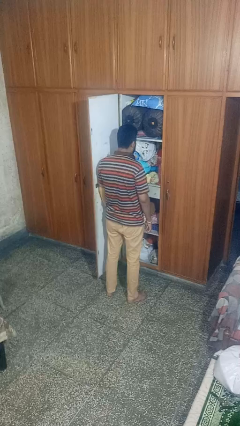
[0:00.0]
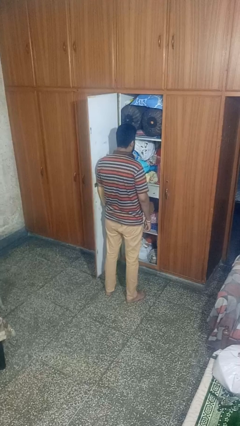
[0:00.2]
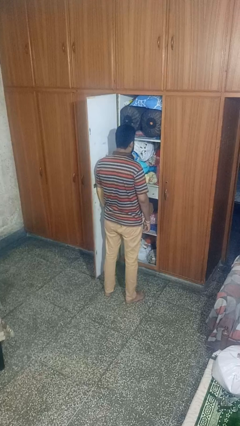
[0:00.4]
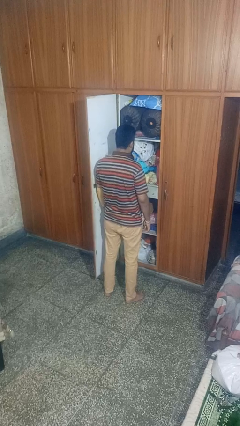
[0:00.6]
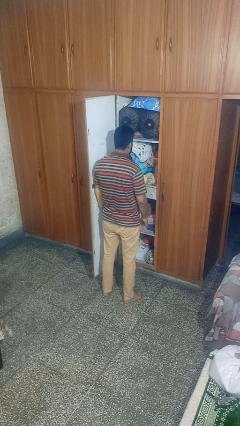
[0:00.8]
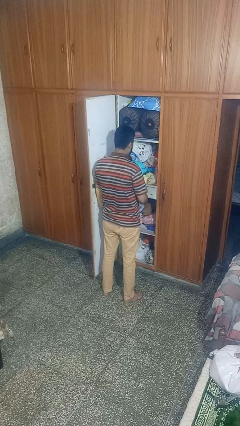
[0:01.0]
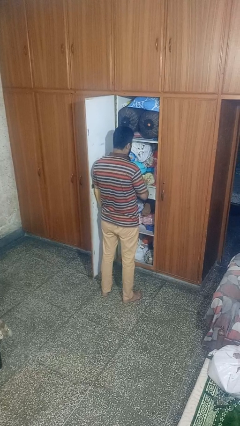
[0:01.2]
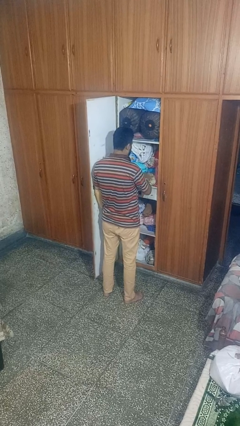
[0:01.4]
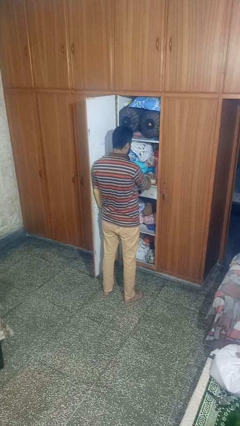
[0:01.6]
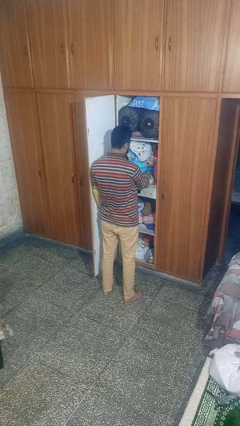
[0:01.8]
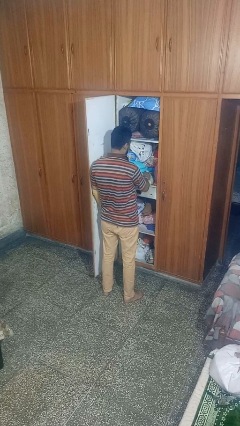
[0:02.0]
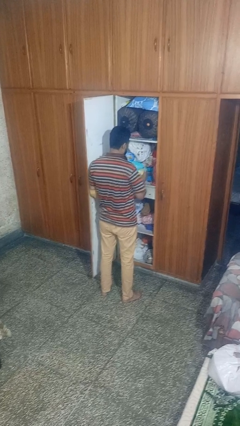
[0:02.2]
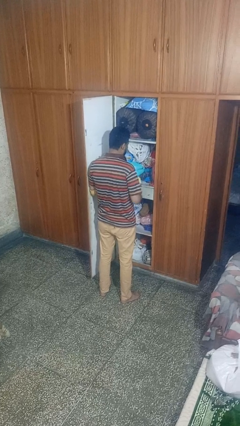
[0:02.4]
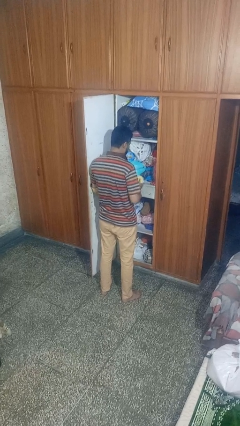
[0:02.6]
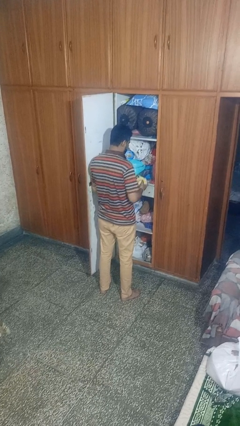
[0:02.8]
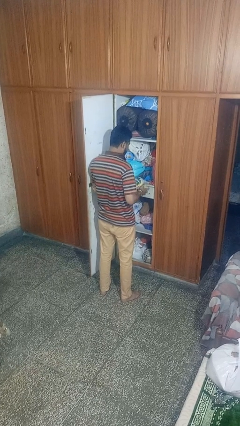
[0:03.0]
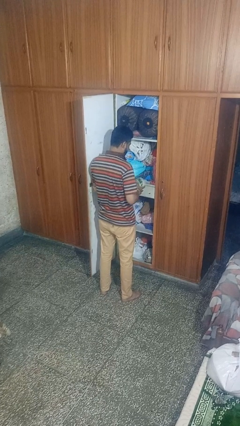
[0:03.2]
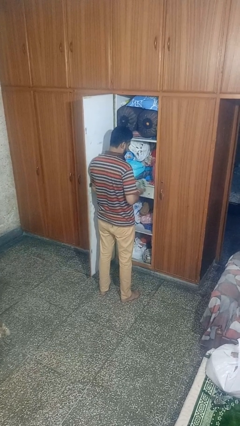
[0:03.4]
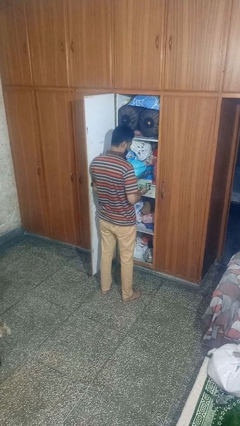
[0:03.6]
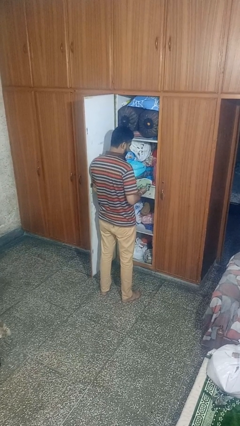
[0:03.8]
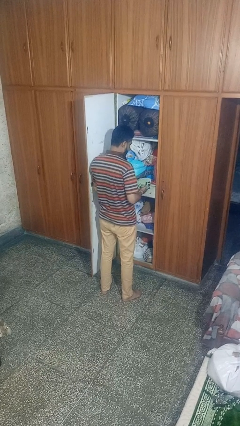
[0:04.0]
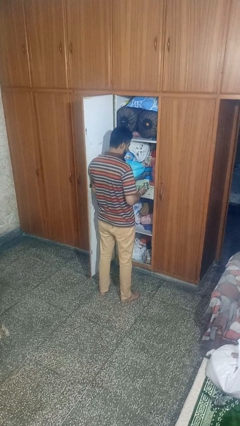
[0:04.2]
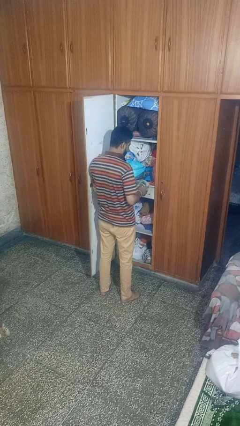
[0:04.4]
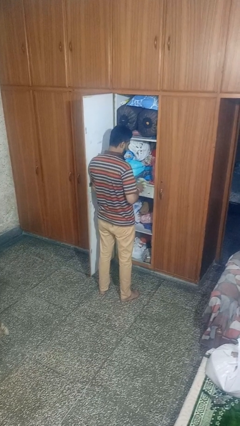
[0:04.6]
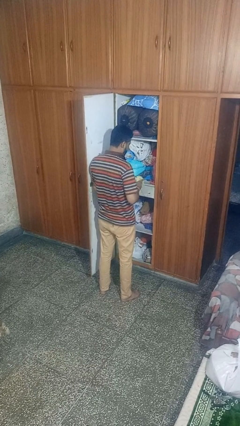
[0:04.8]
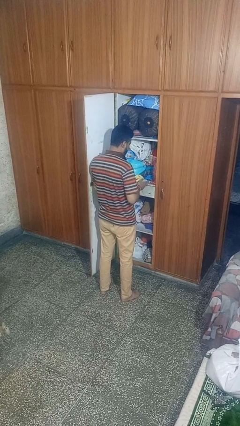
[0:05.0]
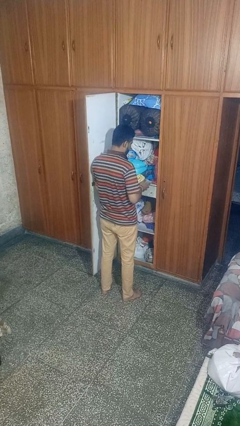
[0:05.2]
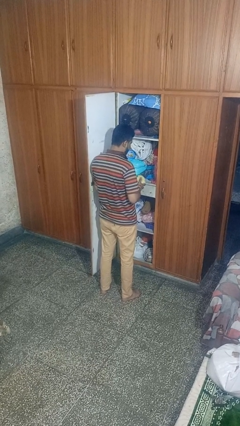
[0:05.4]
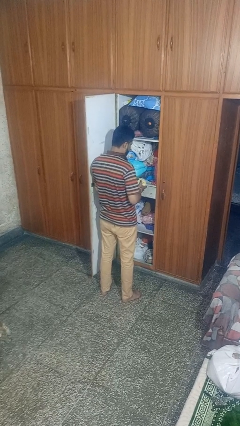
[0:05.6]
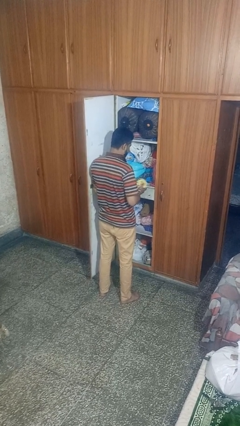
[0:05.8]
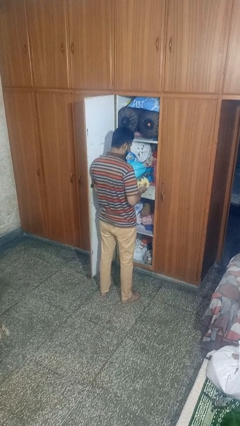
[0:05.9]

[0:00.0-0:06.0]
person picks up object from cabinet

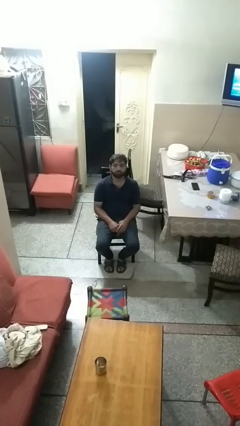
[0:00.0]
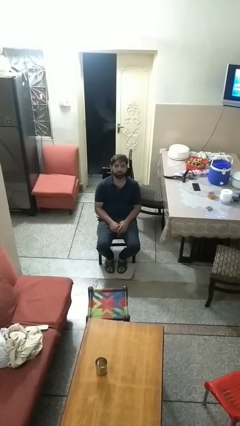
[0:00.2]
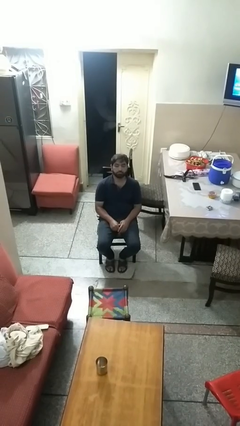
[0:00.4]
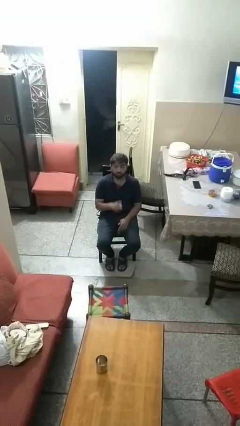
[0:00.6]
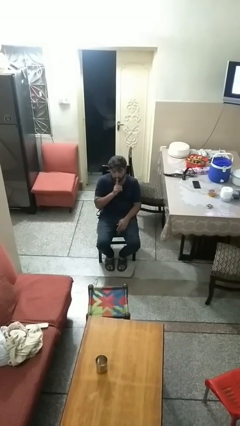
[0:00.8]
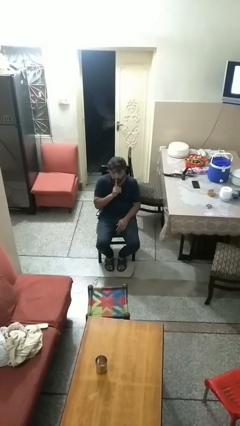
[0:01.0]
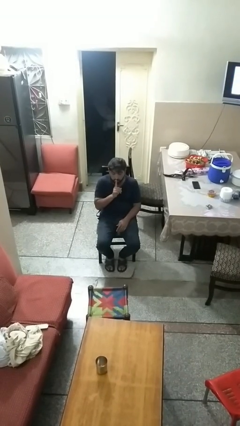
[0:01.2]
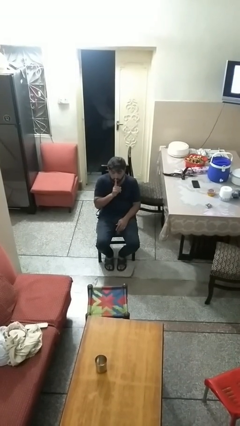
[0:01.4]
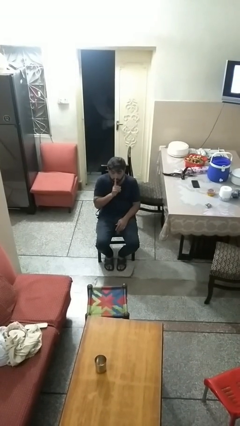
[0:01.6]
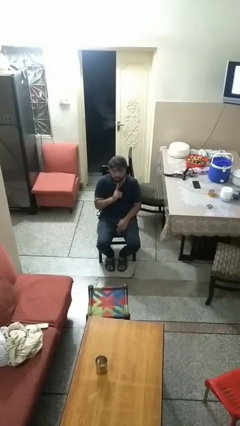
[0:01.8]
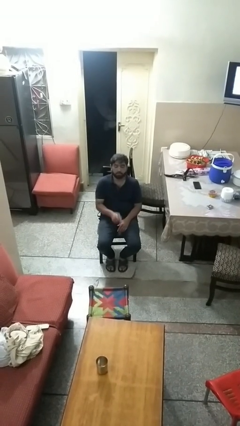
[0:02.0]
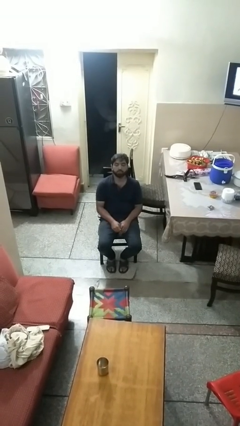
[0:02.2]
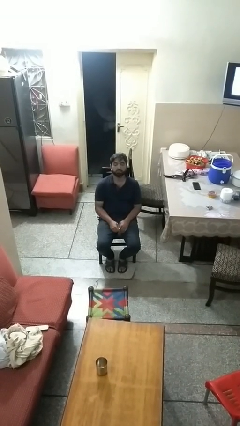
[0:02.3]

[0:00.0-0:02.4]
person gestures be quiet

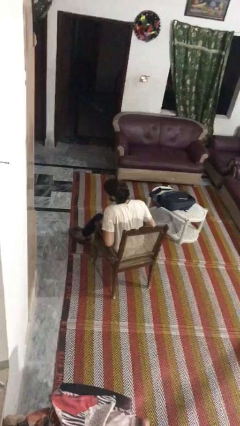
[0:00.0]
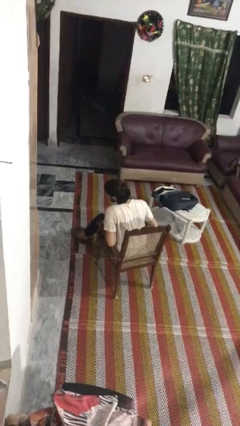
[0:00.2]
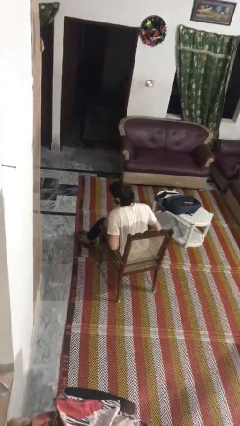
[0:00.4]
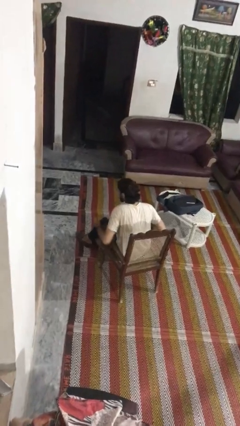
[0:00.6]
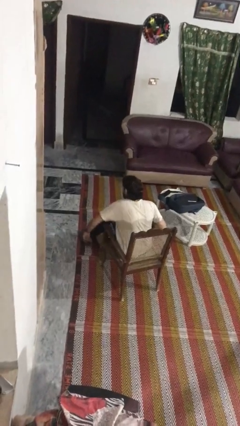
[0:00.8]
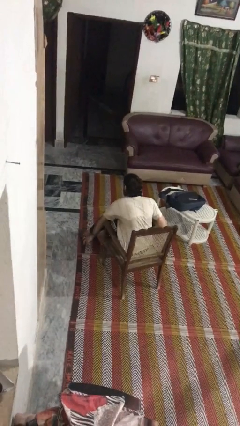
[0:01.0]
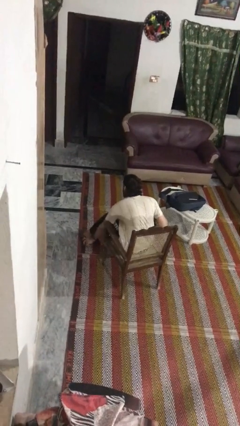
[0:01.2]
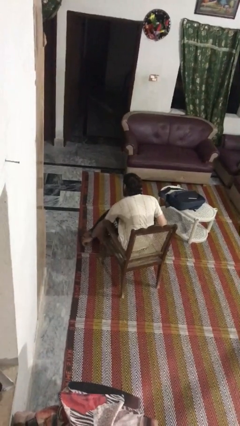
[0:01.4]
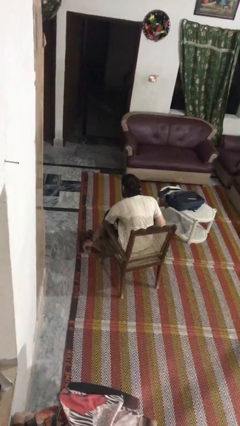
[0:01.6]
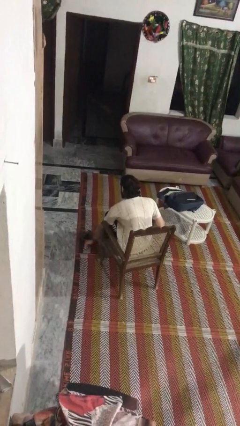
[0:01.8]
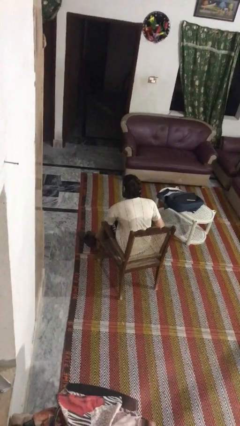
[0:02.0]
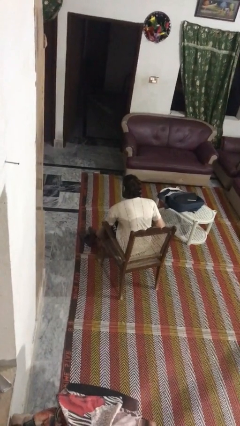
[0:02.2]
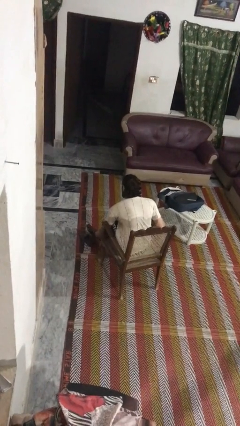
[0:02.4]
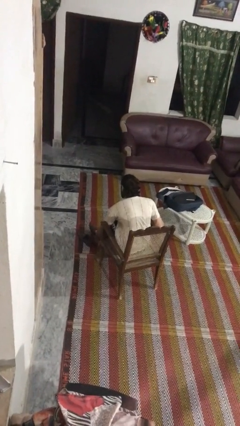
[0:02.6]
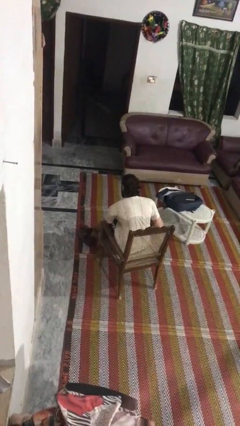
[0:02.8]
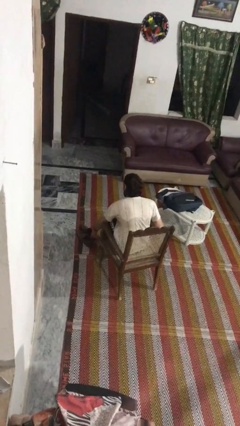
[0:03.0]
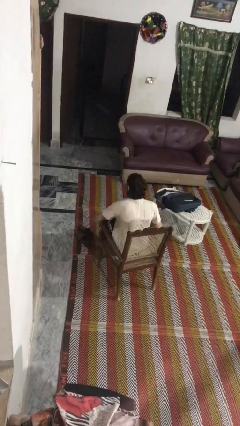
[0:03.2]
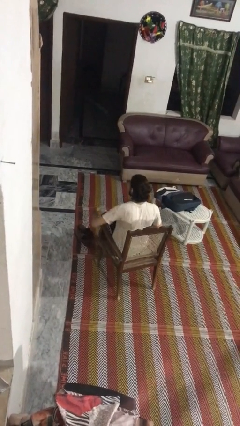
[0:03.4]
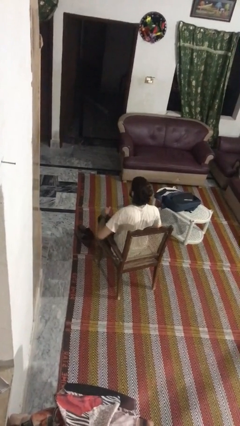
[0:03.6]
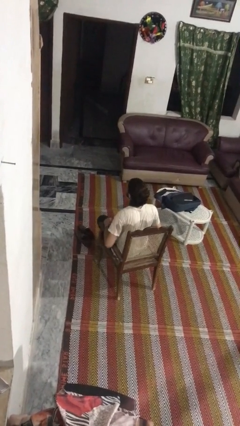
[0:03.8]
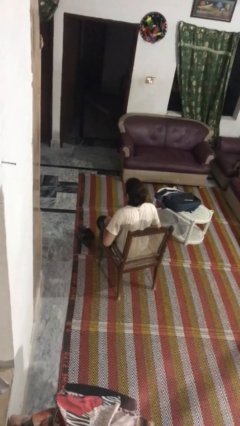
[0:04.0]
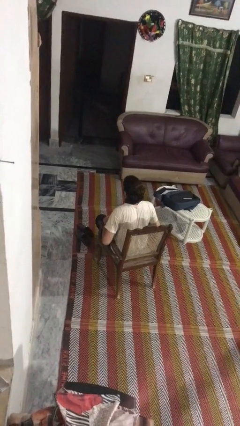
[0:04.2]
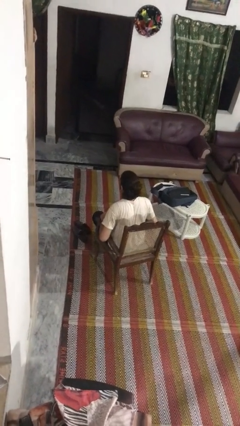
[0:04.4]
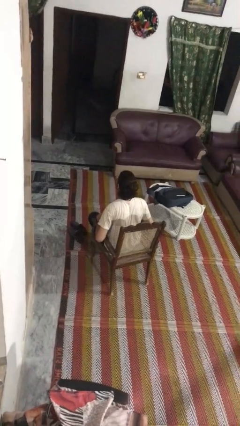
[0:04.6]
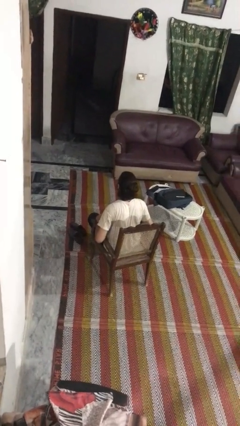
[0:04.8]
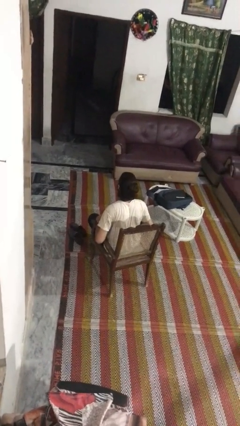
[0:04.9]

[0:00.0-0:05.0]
person takes off shoes

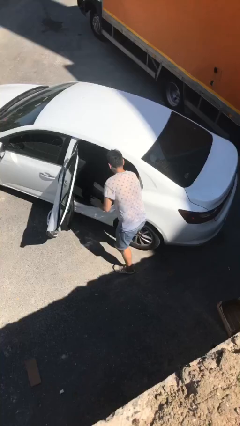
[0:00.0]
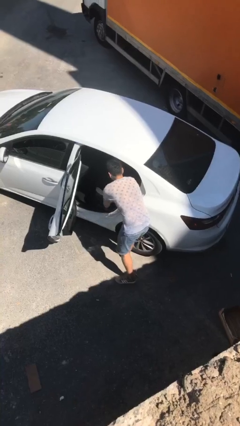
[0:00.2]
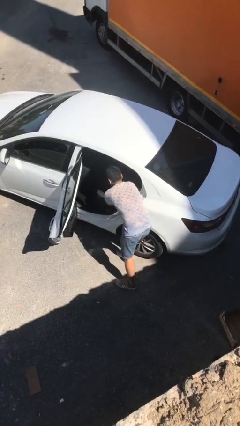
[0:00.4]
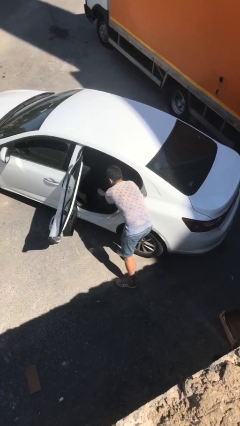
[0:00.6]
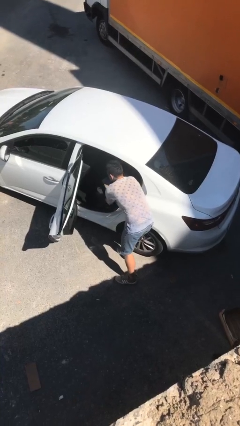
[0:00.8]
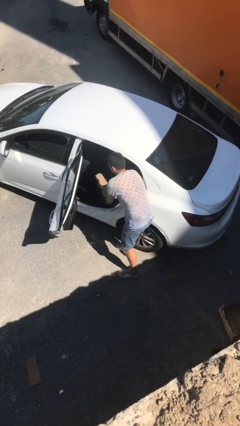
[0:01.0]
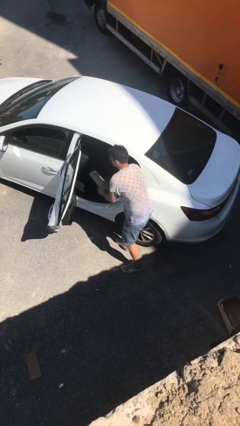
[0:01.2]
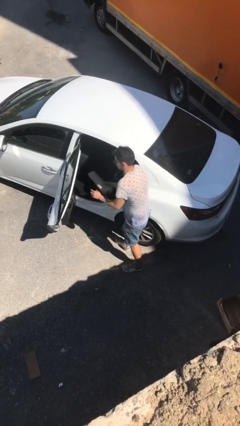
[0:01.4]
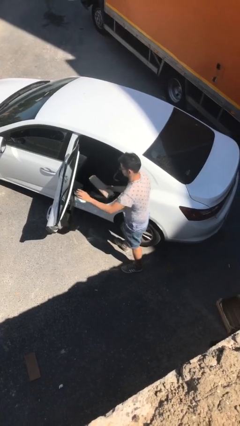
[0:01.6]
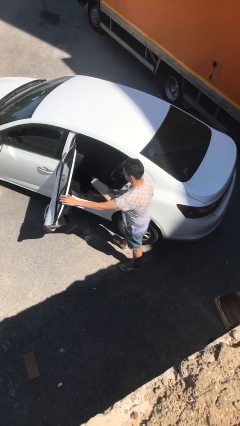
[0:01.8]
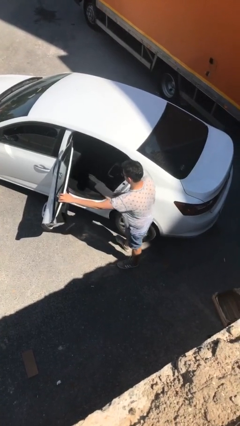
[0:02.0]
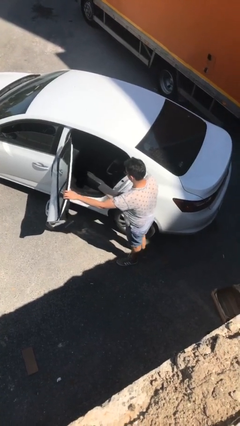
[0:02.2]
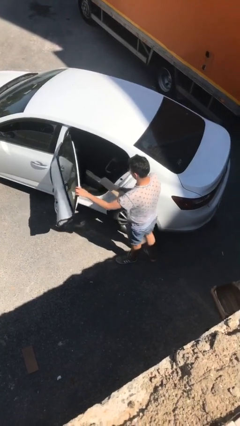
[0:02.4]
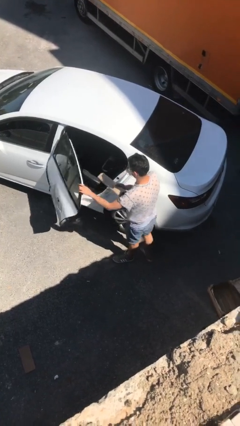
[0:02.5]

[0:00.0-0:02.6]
person unloads car

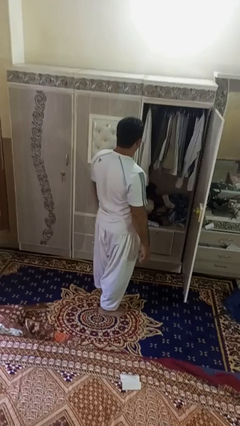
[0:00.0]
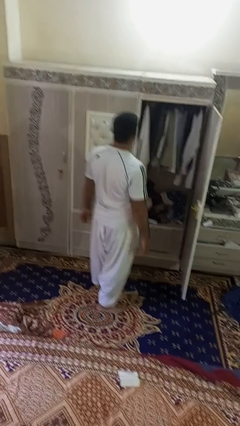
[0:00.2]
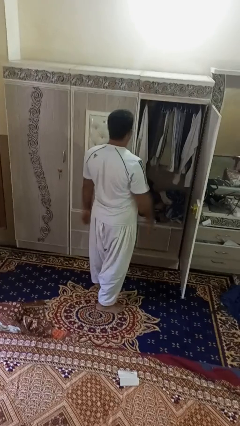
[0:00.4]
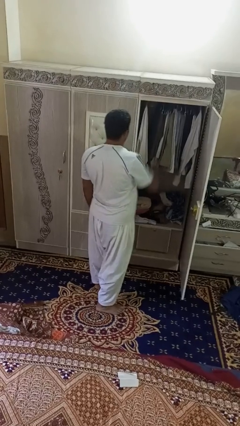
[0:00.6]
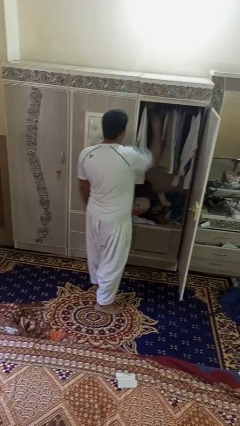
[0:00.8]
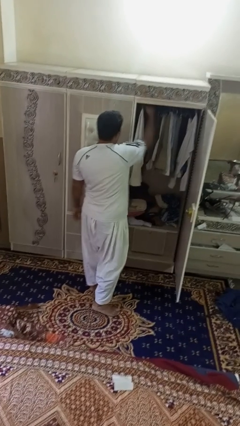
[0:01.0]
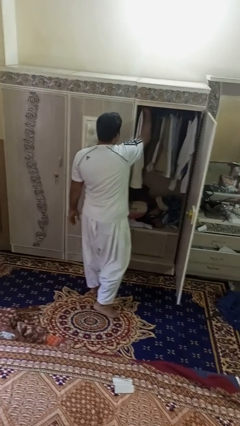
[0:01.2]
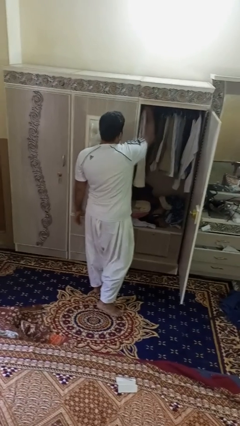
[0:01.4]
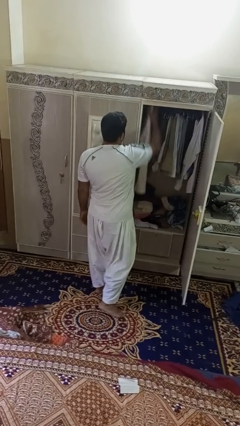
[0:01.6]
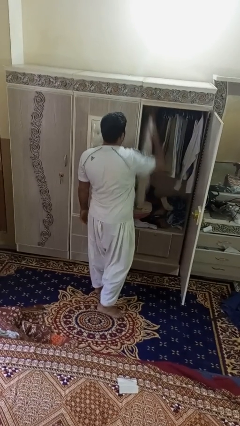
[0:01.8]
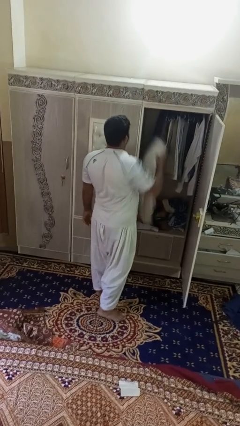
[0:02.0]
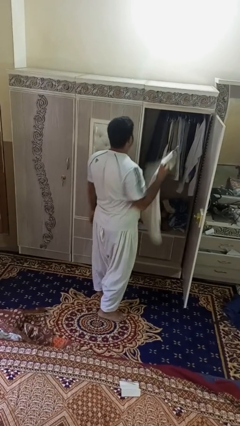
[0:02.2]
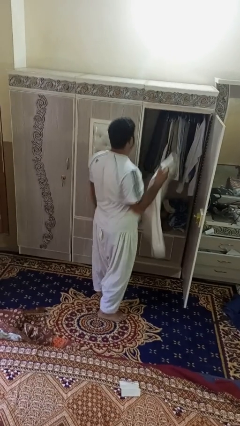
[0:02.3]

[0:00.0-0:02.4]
person takes clothes from closet
